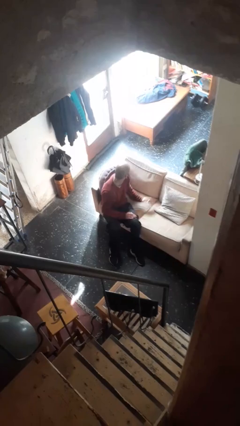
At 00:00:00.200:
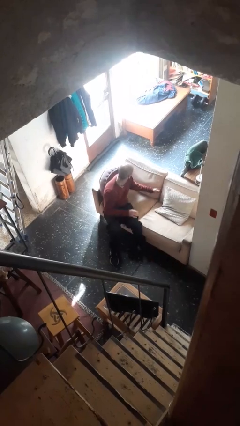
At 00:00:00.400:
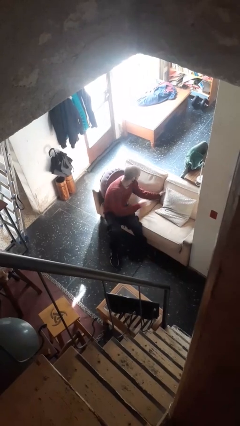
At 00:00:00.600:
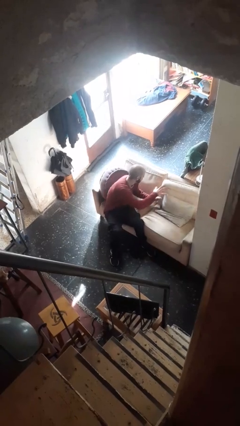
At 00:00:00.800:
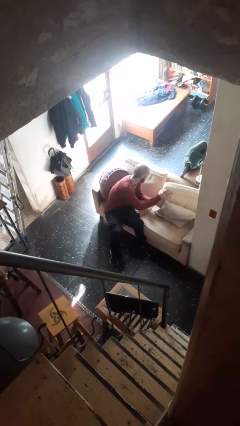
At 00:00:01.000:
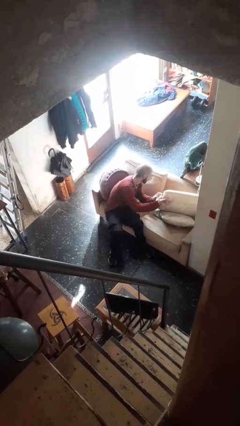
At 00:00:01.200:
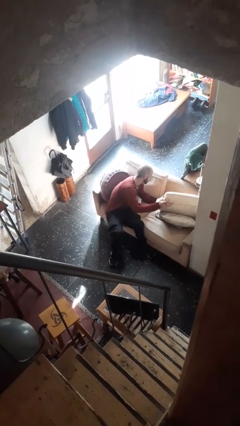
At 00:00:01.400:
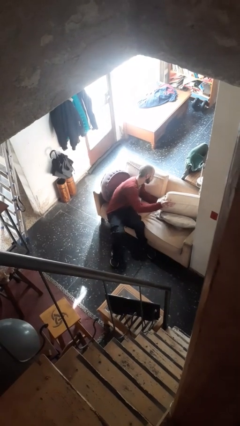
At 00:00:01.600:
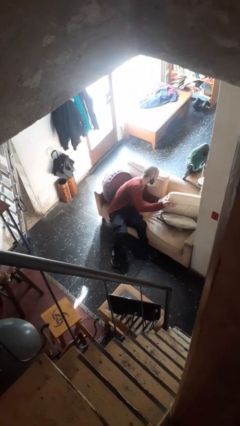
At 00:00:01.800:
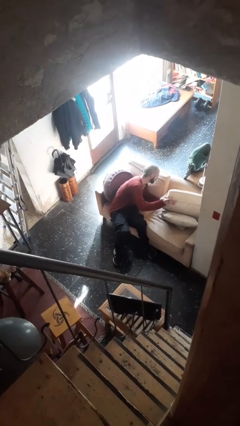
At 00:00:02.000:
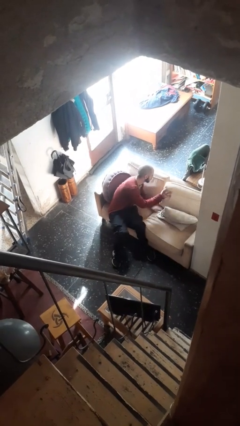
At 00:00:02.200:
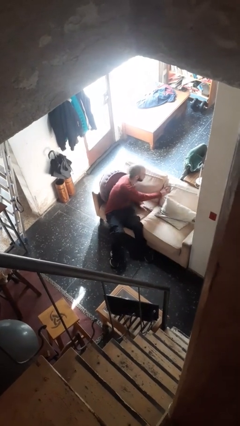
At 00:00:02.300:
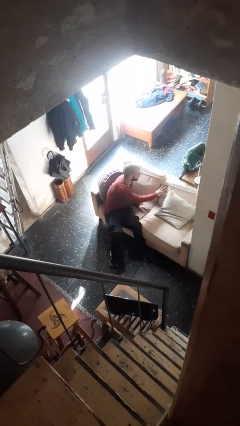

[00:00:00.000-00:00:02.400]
person searches in couch

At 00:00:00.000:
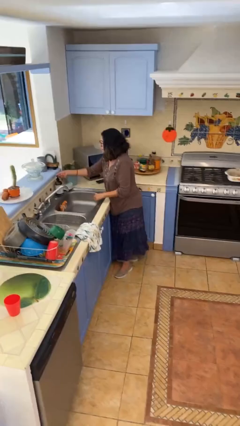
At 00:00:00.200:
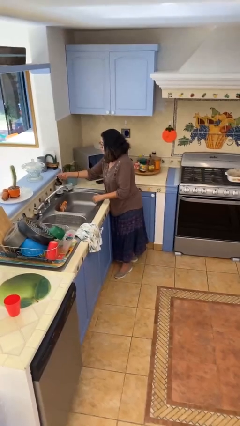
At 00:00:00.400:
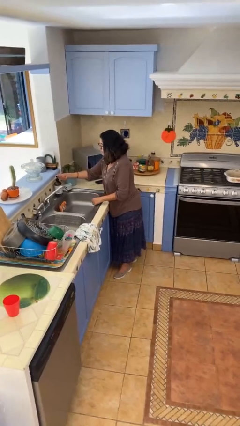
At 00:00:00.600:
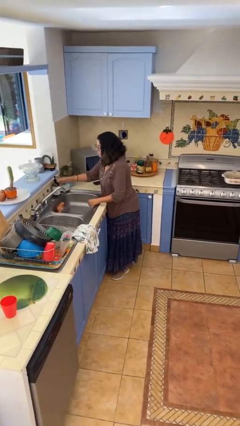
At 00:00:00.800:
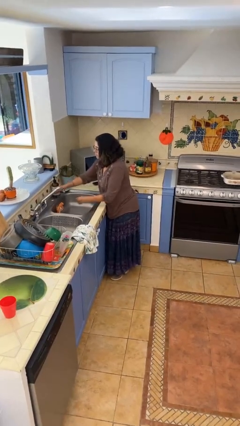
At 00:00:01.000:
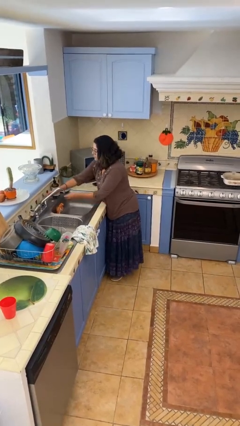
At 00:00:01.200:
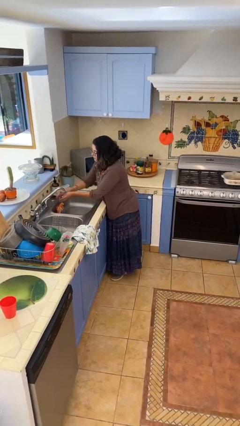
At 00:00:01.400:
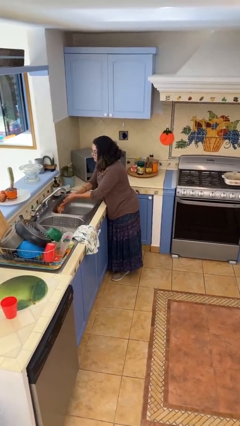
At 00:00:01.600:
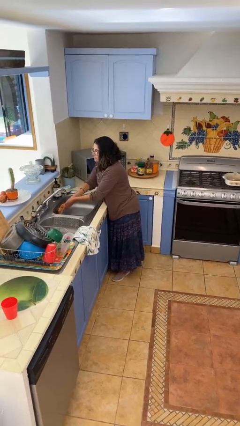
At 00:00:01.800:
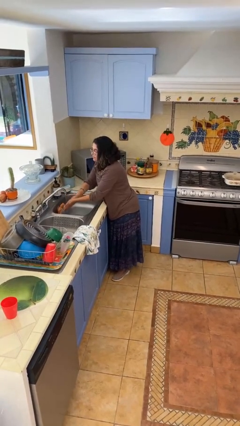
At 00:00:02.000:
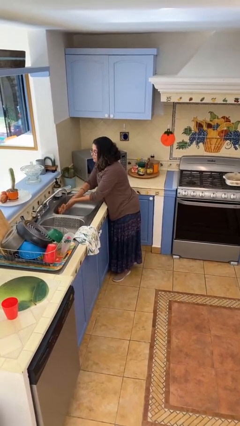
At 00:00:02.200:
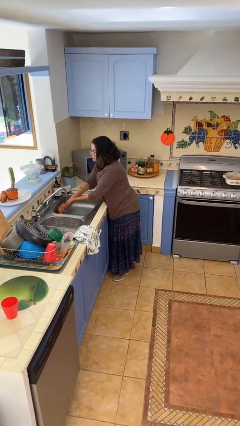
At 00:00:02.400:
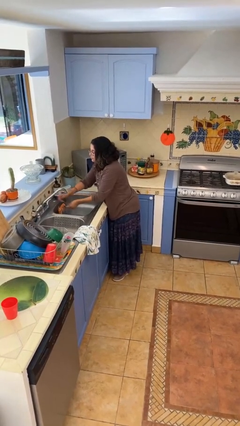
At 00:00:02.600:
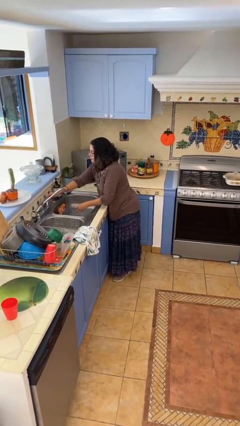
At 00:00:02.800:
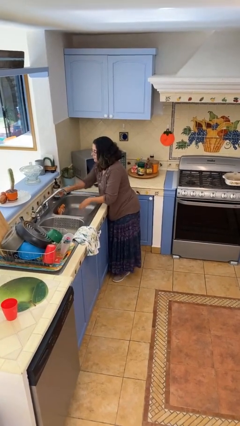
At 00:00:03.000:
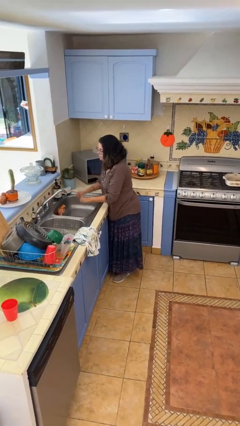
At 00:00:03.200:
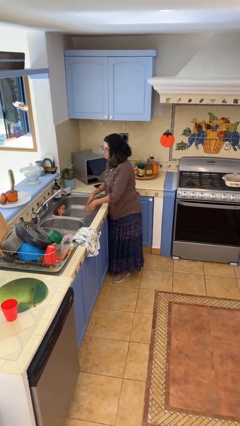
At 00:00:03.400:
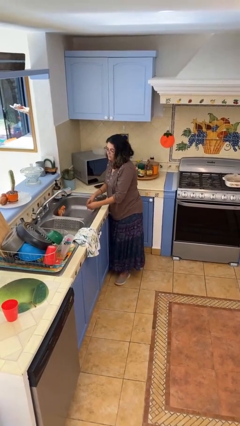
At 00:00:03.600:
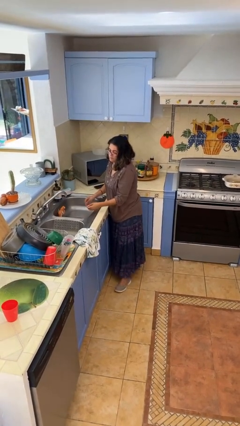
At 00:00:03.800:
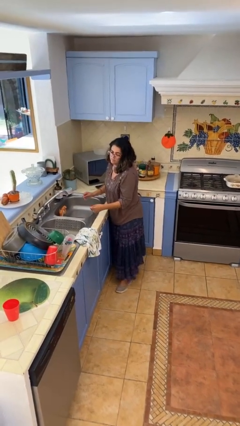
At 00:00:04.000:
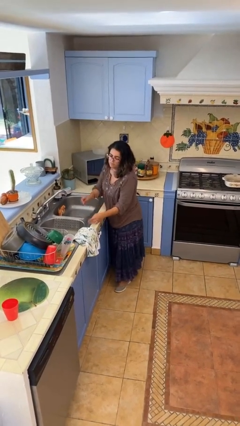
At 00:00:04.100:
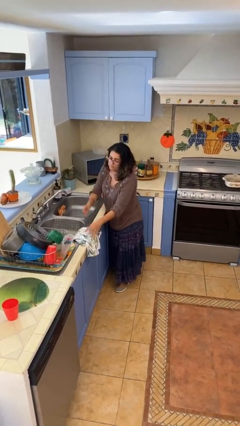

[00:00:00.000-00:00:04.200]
person washes hands

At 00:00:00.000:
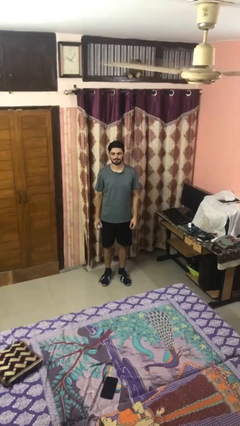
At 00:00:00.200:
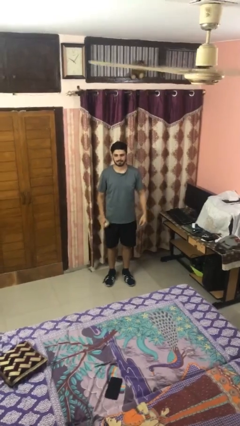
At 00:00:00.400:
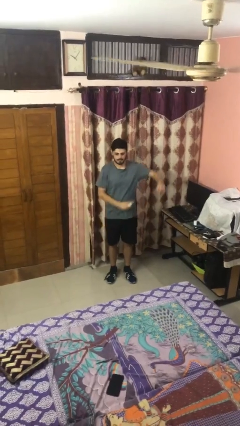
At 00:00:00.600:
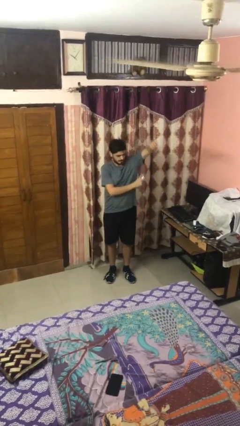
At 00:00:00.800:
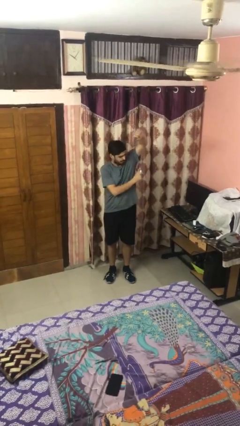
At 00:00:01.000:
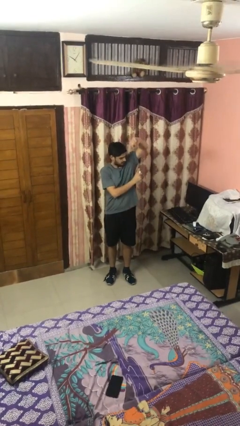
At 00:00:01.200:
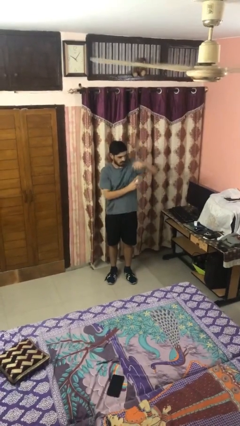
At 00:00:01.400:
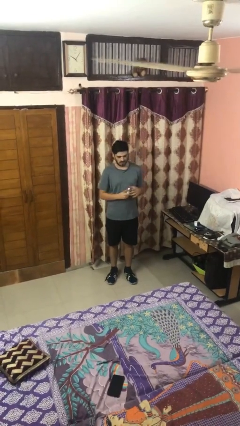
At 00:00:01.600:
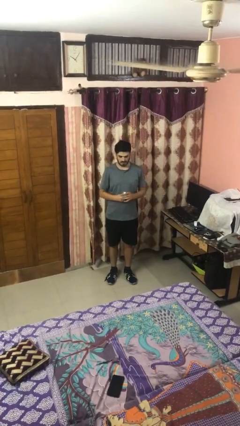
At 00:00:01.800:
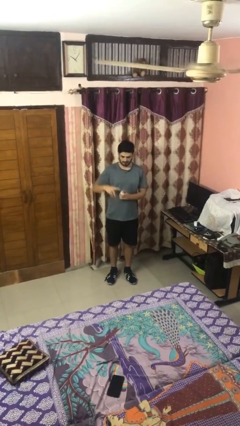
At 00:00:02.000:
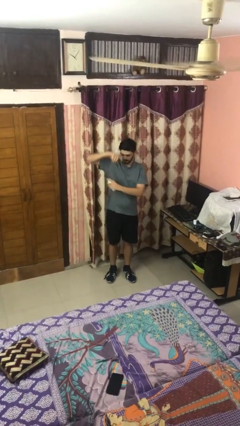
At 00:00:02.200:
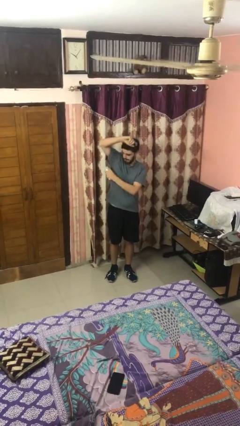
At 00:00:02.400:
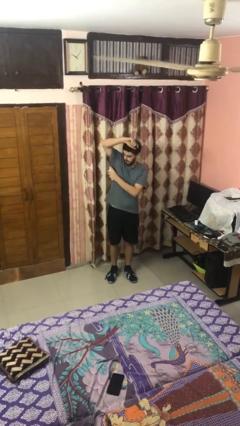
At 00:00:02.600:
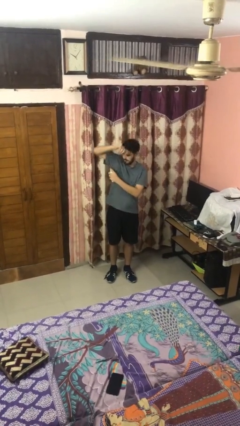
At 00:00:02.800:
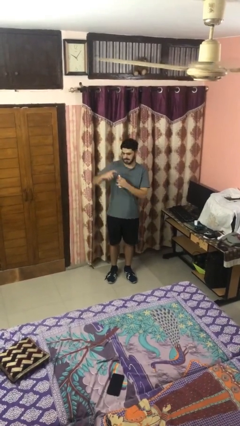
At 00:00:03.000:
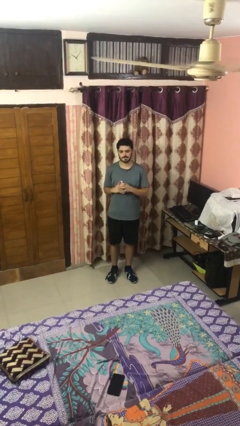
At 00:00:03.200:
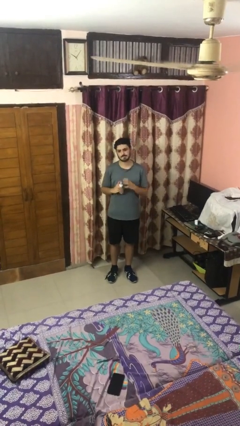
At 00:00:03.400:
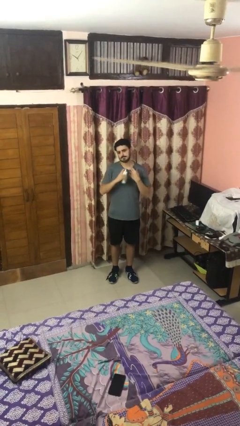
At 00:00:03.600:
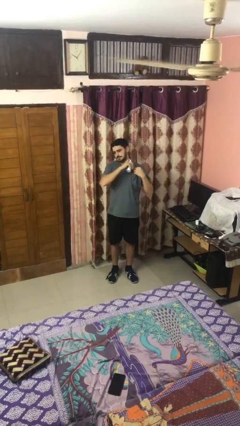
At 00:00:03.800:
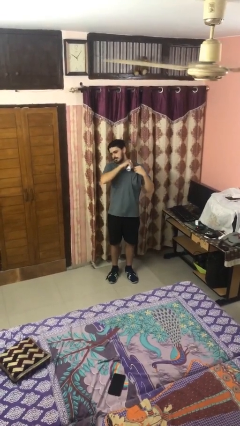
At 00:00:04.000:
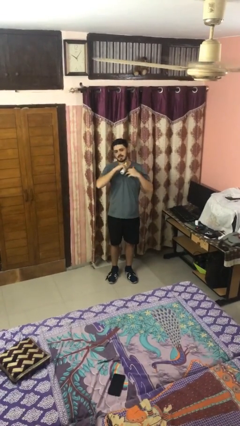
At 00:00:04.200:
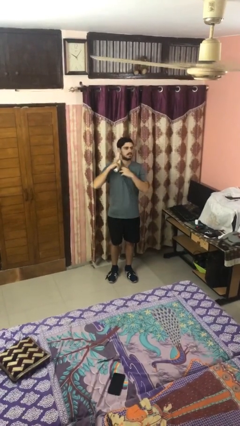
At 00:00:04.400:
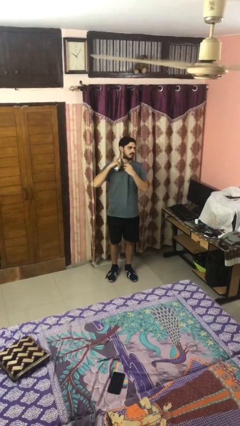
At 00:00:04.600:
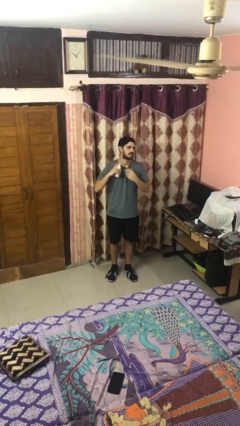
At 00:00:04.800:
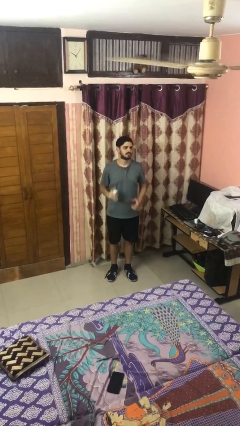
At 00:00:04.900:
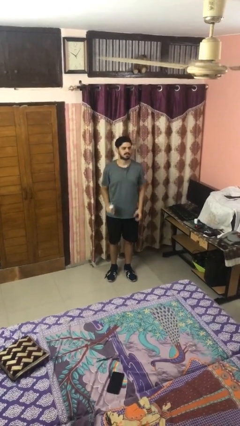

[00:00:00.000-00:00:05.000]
person applies deodorant

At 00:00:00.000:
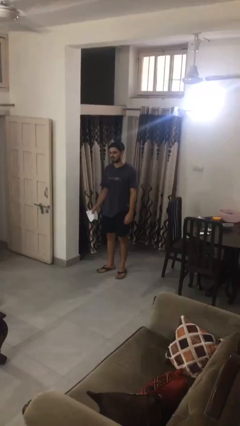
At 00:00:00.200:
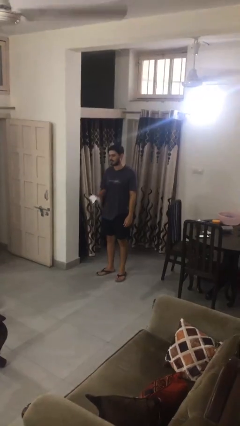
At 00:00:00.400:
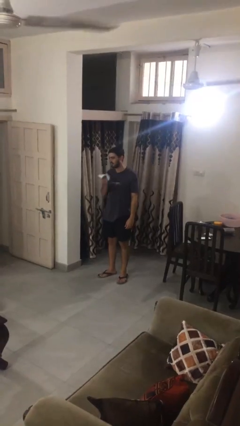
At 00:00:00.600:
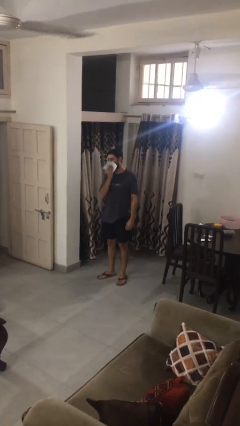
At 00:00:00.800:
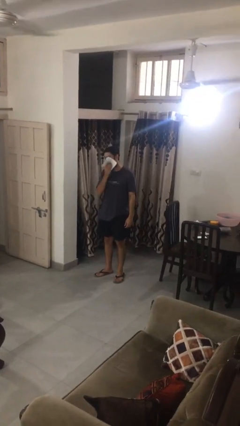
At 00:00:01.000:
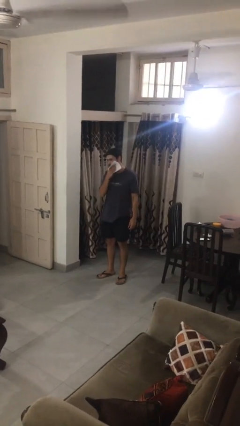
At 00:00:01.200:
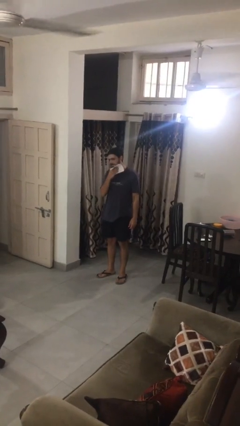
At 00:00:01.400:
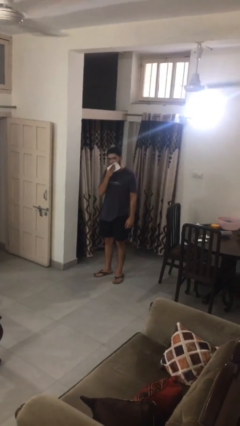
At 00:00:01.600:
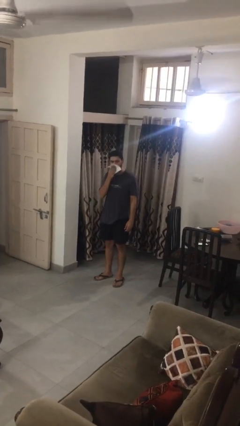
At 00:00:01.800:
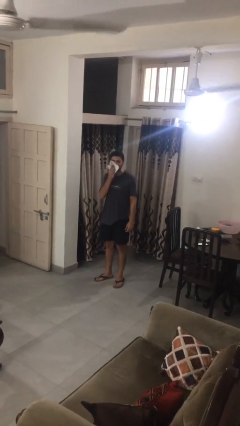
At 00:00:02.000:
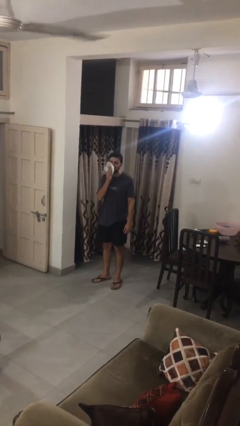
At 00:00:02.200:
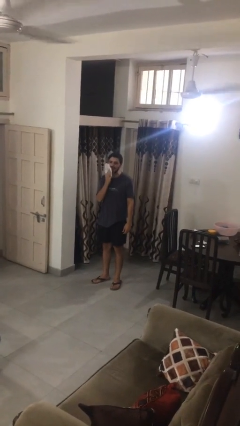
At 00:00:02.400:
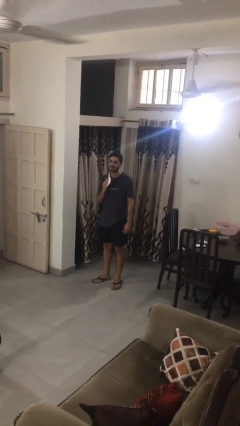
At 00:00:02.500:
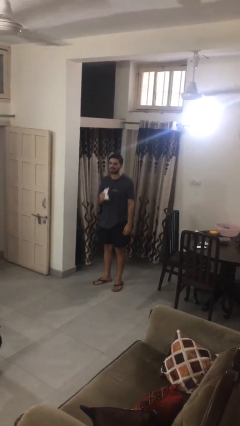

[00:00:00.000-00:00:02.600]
person wipes mouth with napkin

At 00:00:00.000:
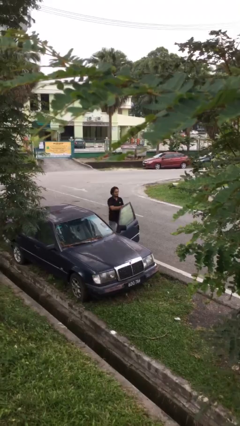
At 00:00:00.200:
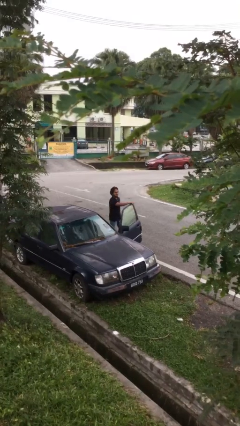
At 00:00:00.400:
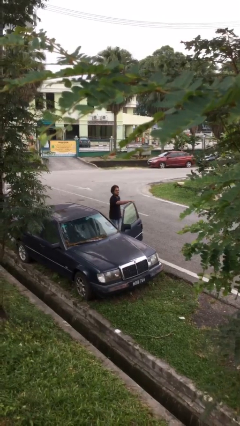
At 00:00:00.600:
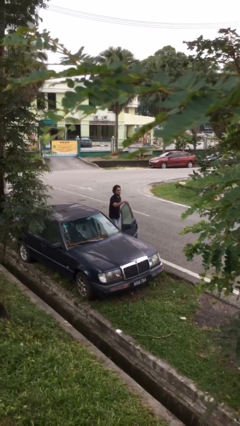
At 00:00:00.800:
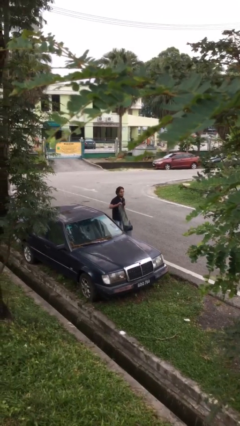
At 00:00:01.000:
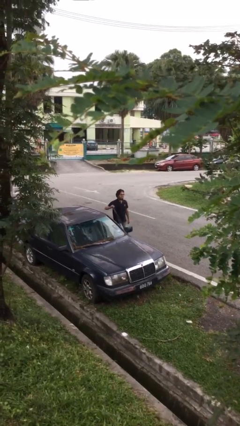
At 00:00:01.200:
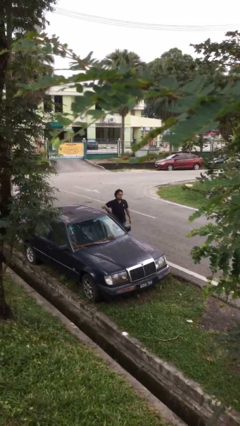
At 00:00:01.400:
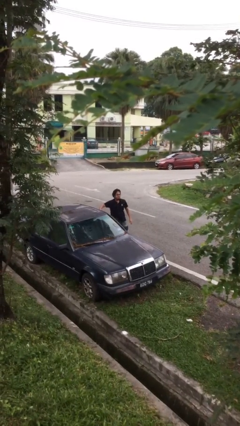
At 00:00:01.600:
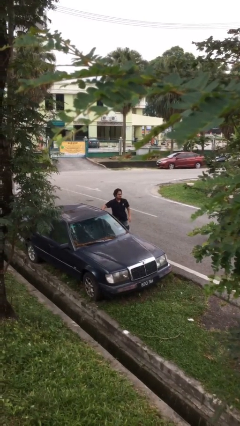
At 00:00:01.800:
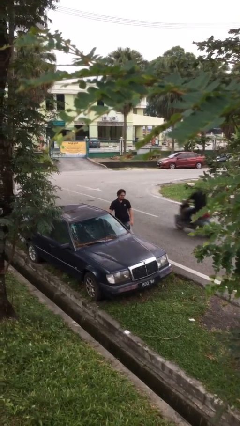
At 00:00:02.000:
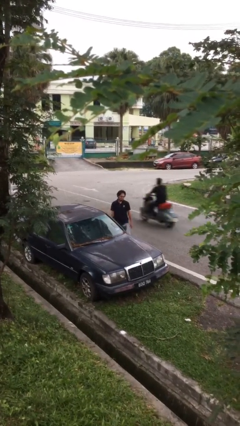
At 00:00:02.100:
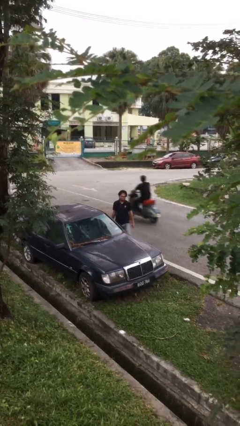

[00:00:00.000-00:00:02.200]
person closes car door

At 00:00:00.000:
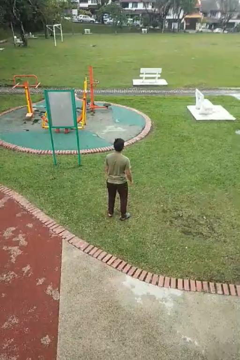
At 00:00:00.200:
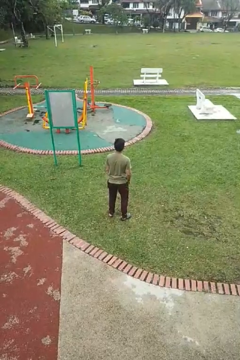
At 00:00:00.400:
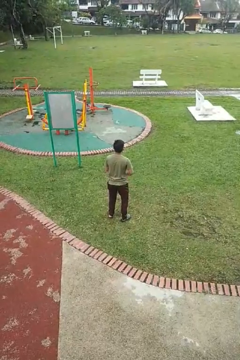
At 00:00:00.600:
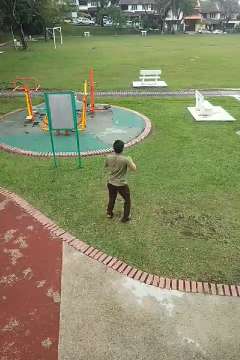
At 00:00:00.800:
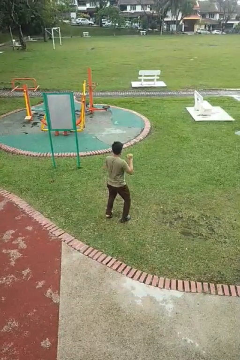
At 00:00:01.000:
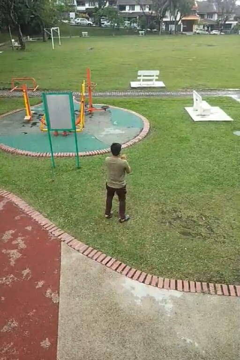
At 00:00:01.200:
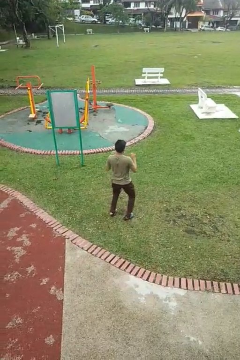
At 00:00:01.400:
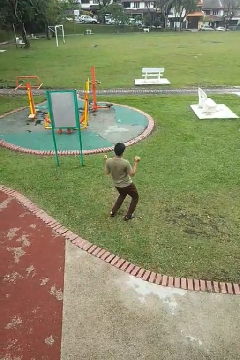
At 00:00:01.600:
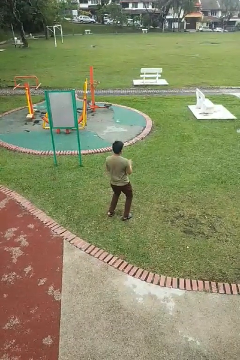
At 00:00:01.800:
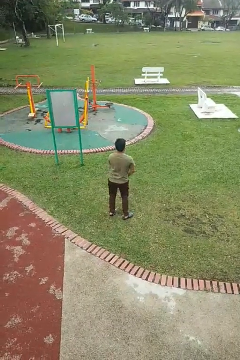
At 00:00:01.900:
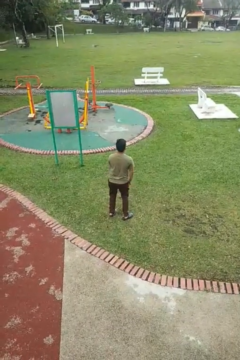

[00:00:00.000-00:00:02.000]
person dances in place
